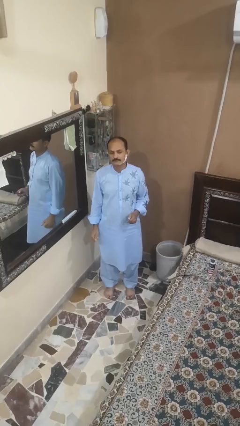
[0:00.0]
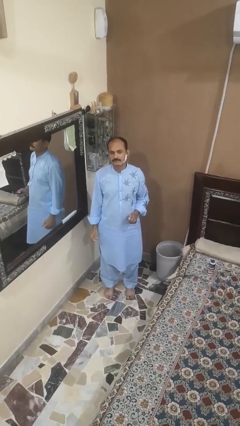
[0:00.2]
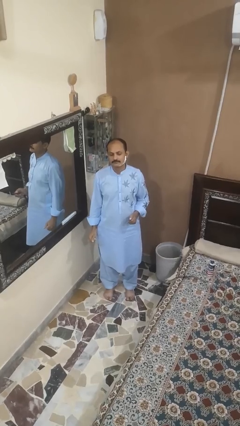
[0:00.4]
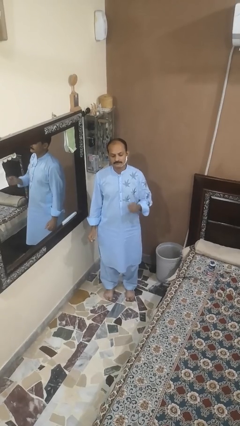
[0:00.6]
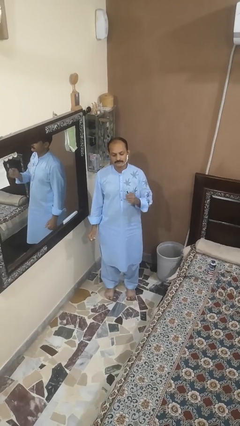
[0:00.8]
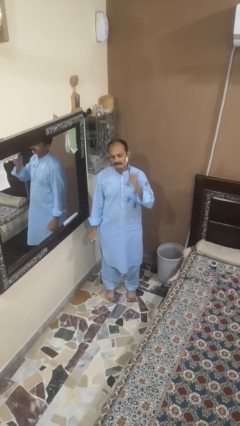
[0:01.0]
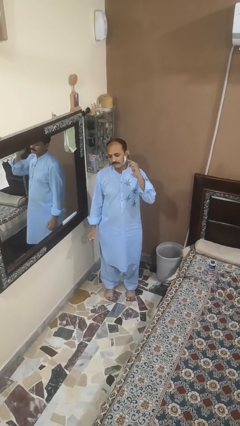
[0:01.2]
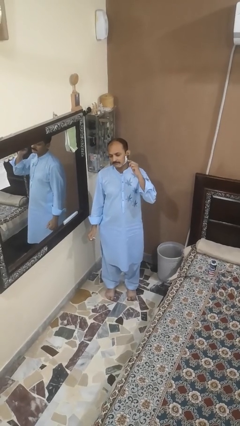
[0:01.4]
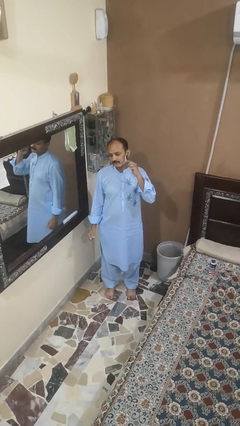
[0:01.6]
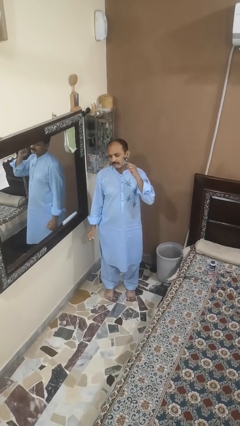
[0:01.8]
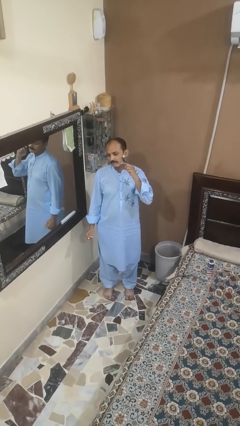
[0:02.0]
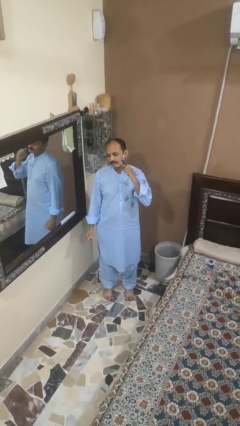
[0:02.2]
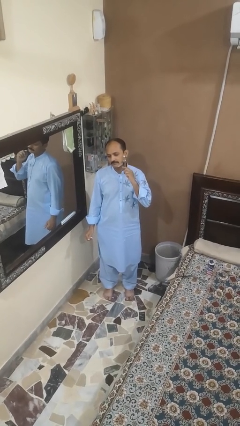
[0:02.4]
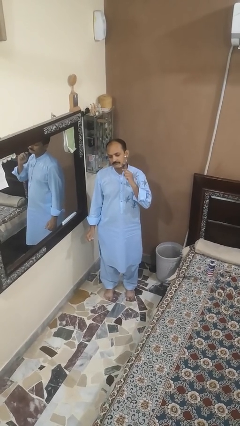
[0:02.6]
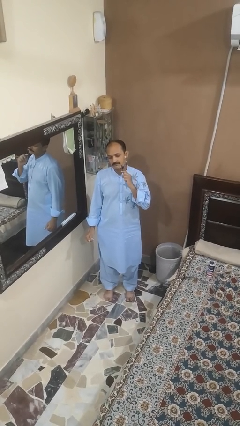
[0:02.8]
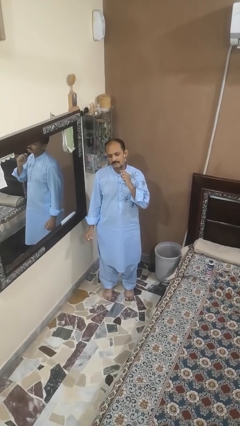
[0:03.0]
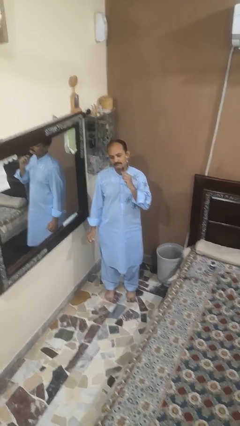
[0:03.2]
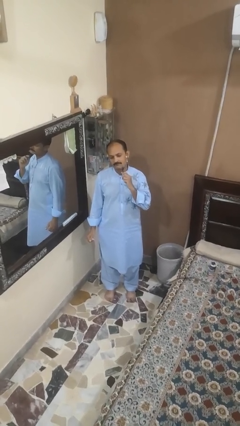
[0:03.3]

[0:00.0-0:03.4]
person shaves face

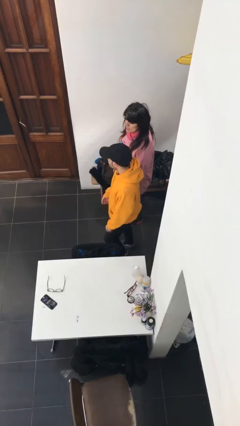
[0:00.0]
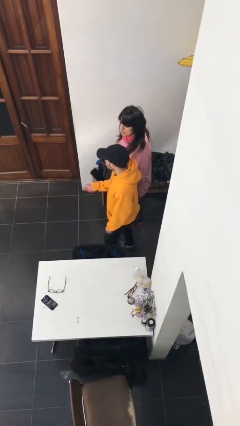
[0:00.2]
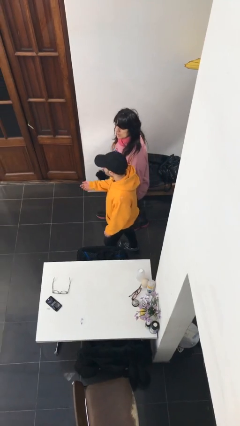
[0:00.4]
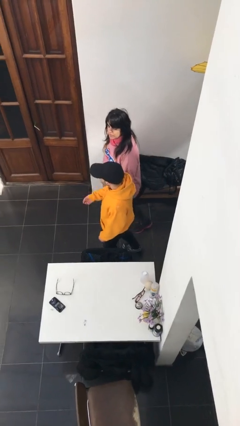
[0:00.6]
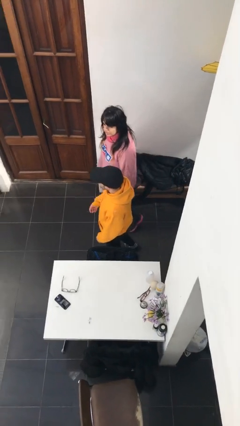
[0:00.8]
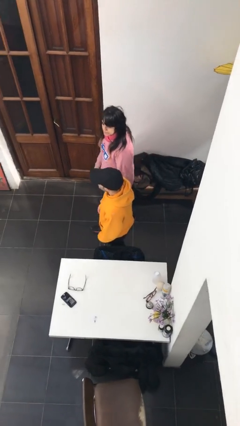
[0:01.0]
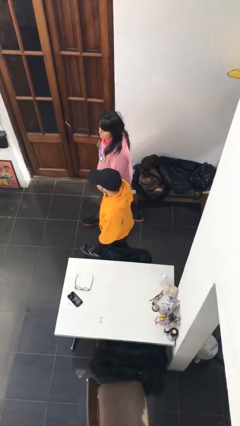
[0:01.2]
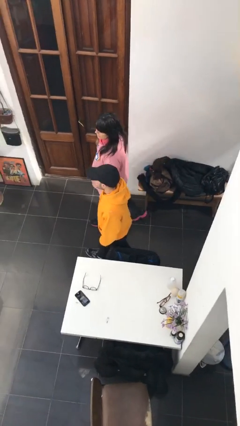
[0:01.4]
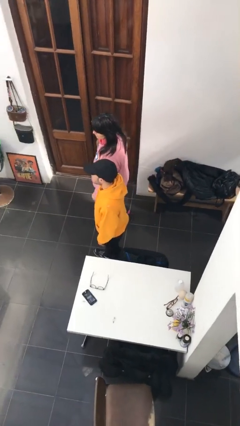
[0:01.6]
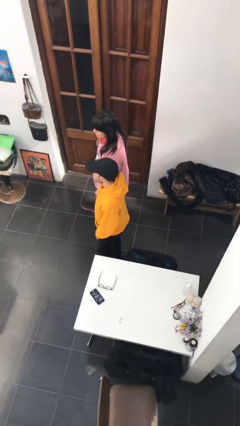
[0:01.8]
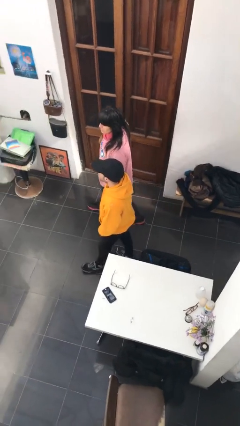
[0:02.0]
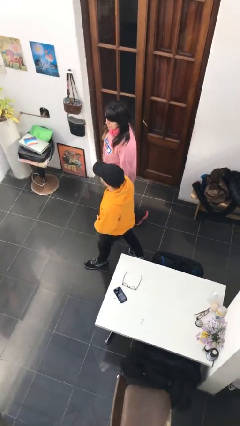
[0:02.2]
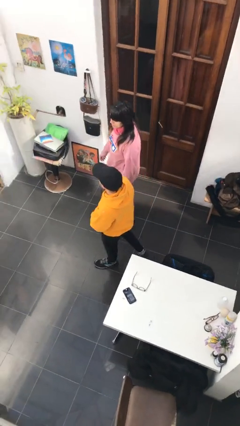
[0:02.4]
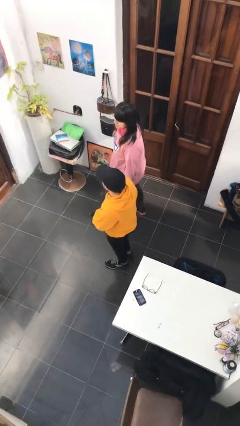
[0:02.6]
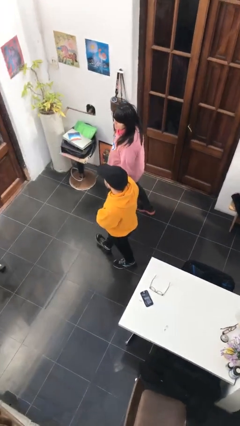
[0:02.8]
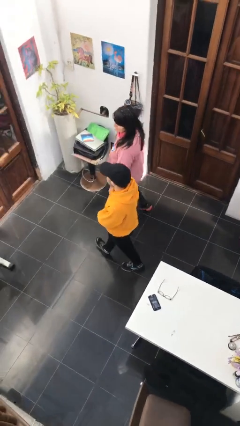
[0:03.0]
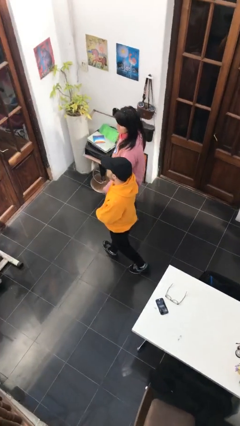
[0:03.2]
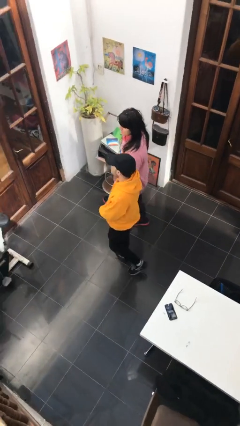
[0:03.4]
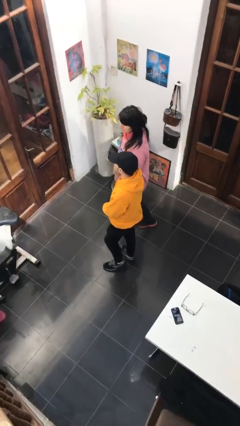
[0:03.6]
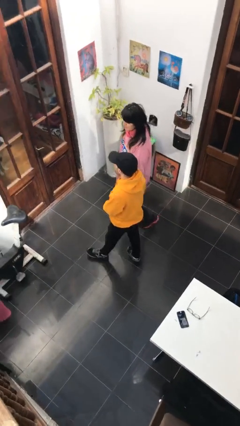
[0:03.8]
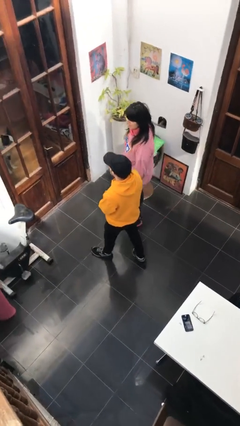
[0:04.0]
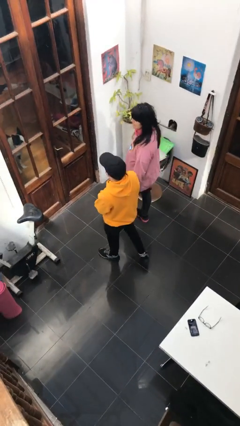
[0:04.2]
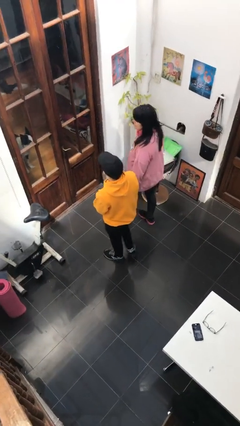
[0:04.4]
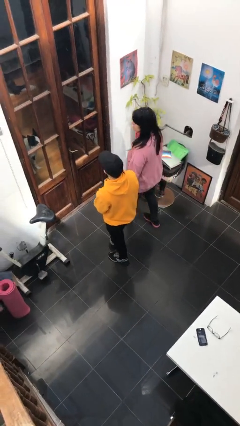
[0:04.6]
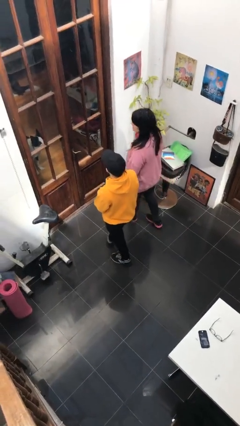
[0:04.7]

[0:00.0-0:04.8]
person talks to person

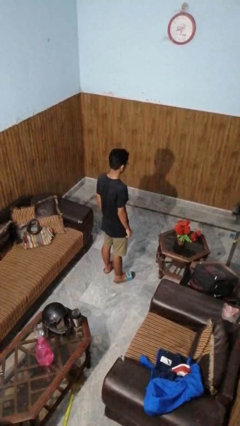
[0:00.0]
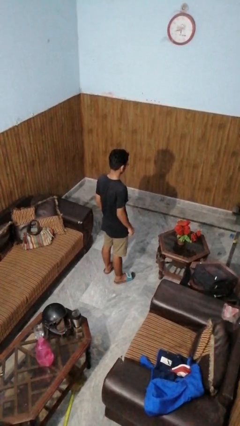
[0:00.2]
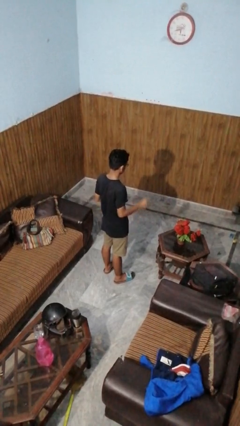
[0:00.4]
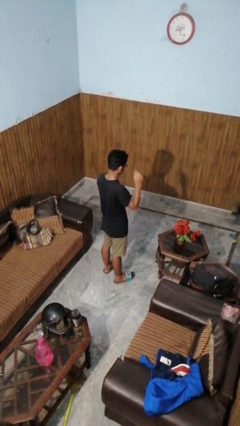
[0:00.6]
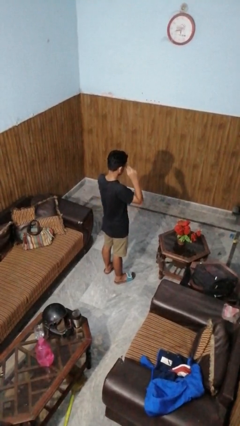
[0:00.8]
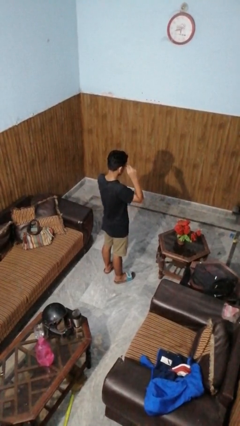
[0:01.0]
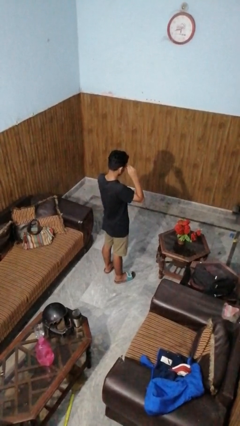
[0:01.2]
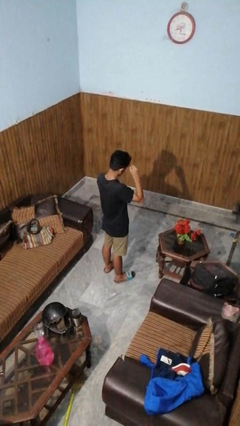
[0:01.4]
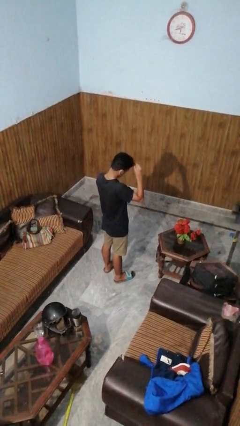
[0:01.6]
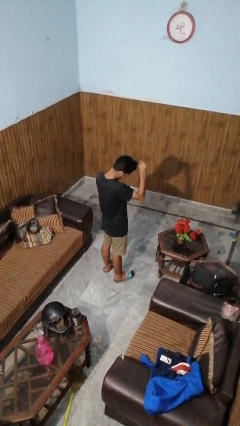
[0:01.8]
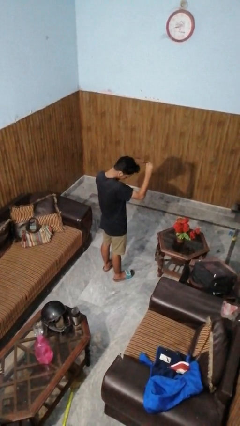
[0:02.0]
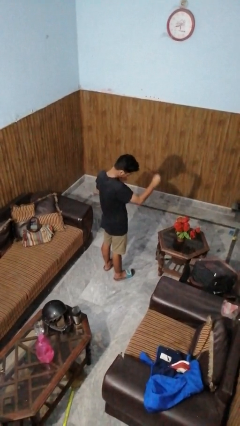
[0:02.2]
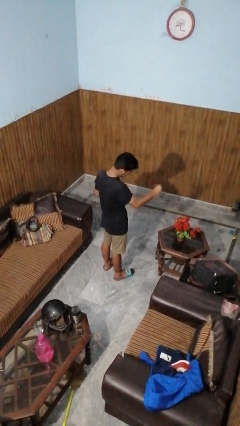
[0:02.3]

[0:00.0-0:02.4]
person takes off glasses

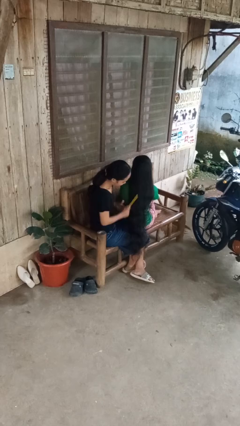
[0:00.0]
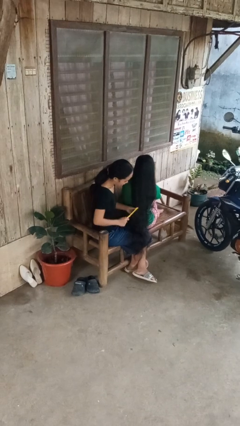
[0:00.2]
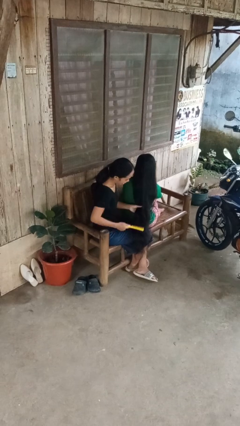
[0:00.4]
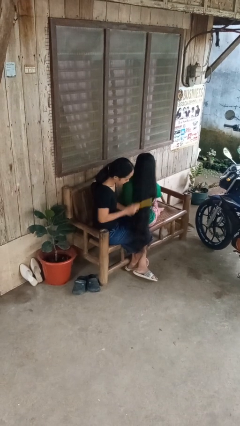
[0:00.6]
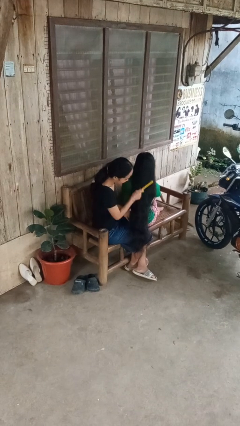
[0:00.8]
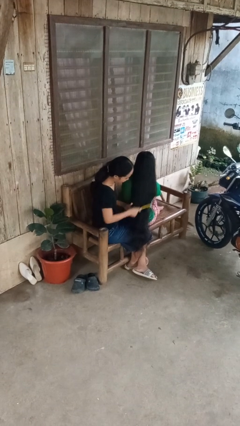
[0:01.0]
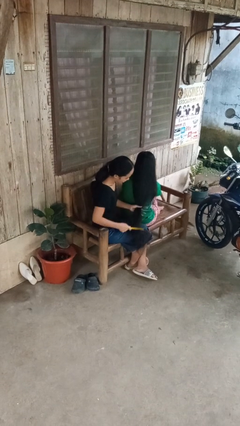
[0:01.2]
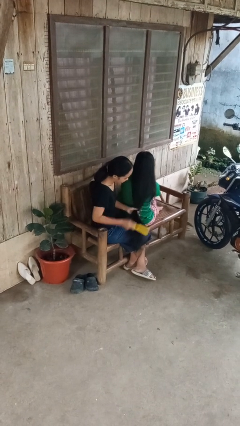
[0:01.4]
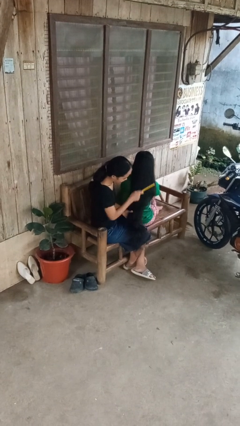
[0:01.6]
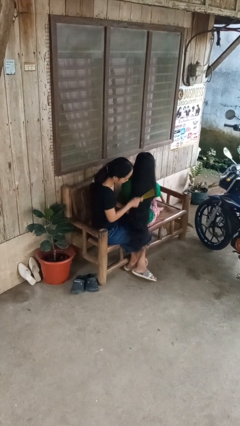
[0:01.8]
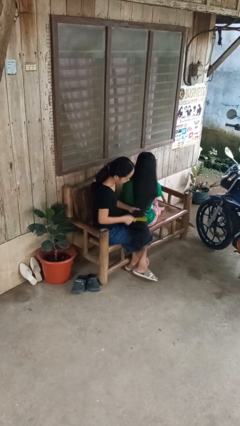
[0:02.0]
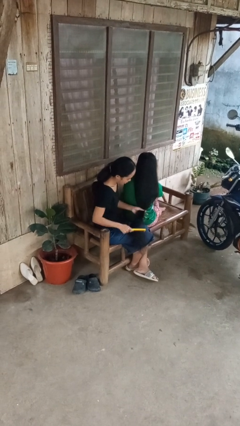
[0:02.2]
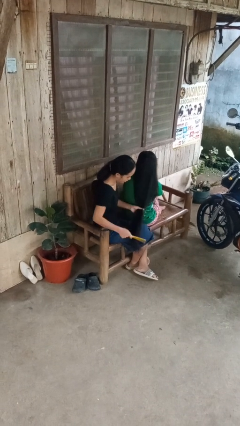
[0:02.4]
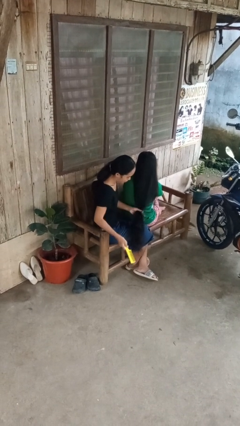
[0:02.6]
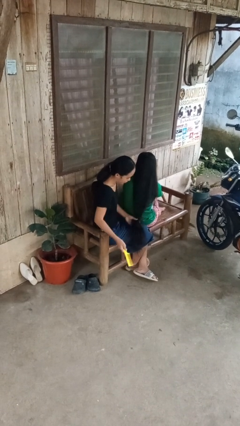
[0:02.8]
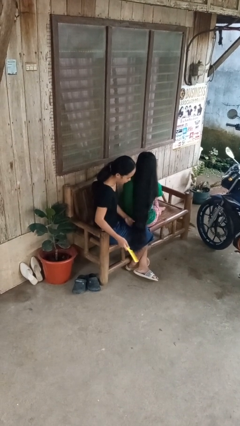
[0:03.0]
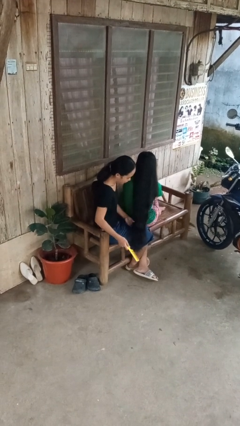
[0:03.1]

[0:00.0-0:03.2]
person brushes hair of person

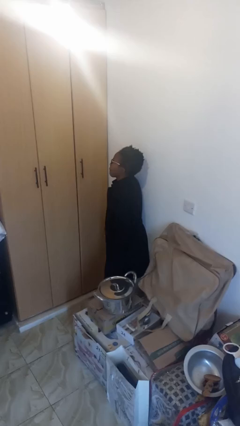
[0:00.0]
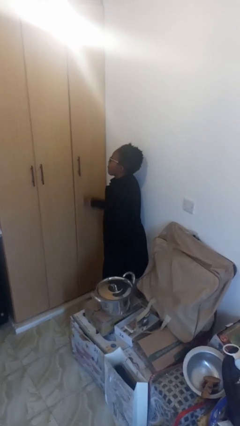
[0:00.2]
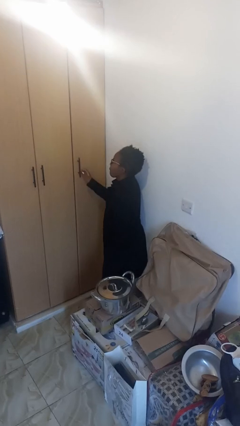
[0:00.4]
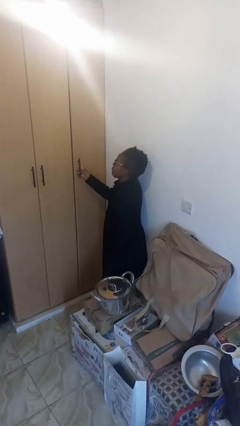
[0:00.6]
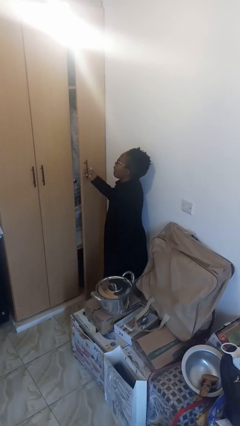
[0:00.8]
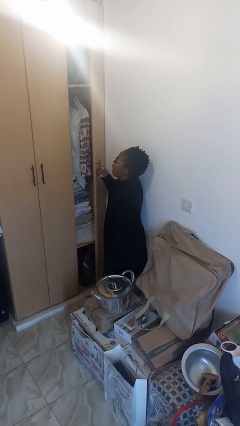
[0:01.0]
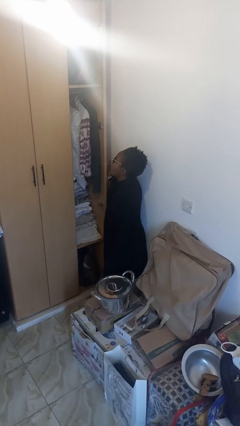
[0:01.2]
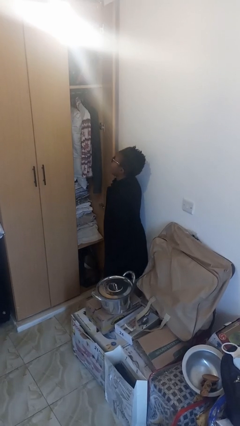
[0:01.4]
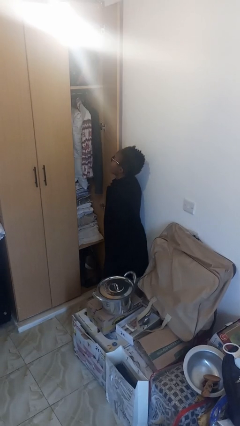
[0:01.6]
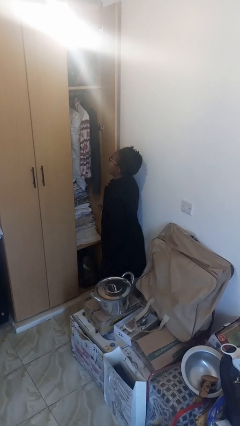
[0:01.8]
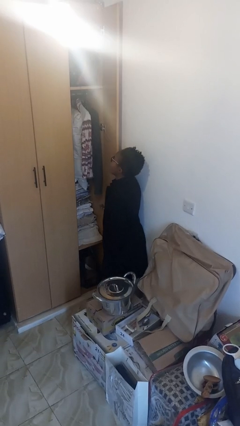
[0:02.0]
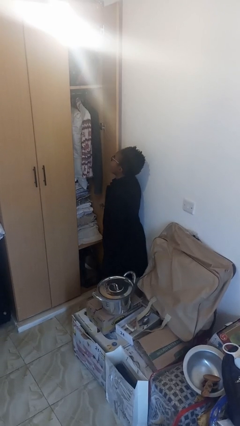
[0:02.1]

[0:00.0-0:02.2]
person opens closet door

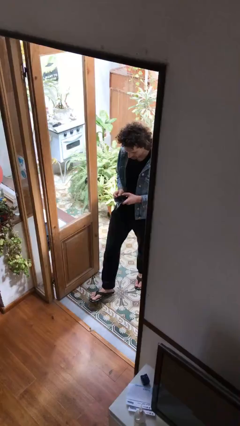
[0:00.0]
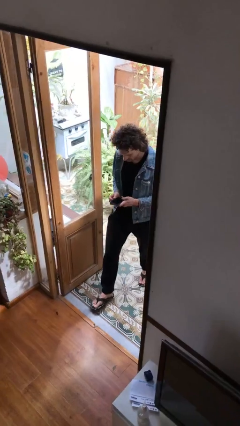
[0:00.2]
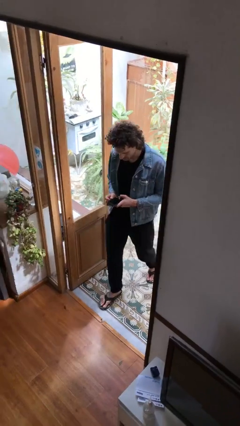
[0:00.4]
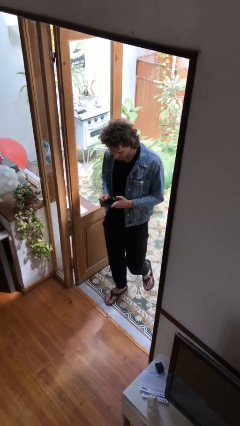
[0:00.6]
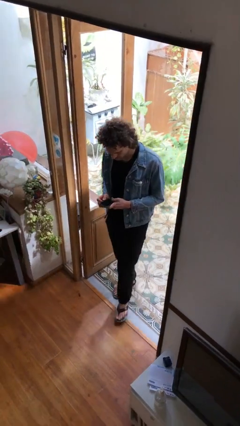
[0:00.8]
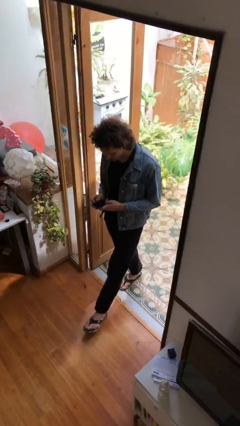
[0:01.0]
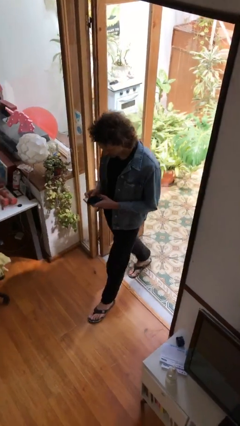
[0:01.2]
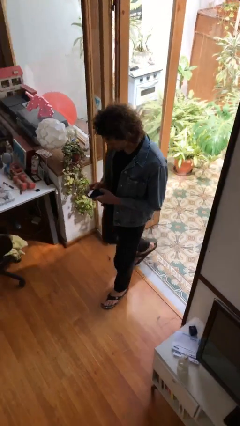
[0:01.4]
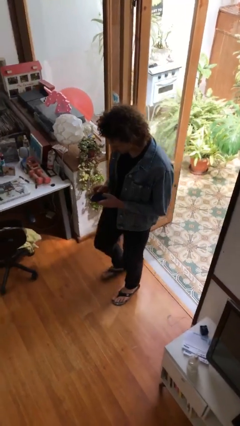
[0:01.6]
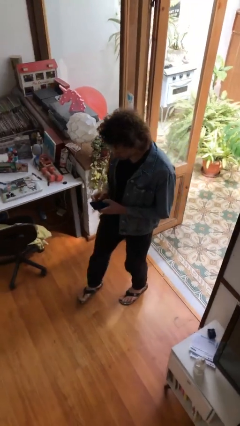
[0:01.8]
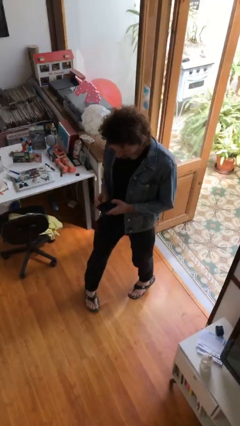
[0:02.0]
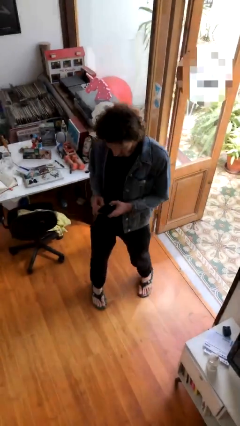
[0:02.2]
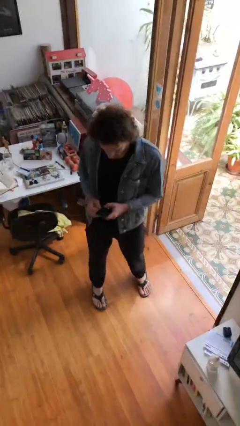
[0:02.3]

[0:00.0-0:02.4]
person enters scene through structure
